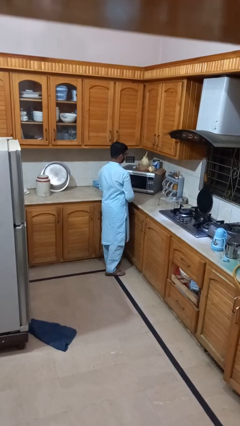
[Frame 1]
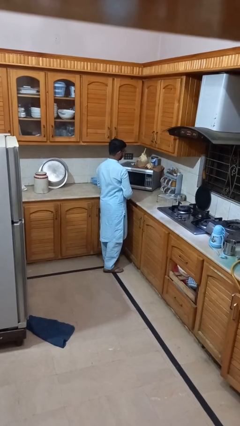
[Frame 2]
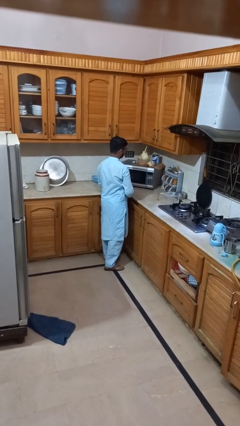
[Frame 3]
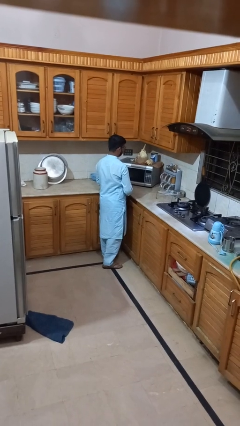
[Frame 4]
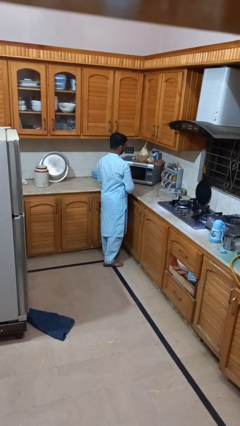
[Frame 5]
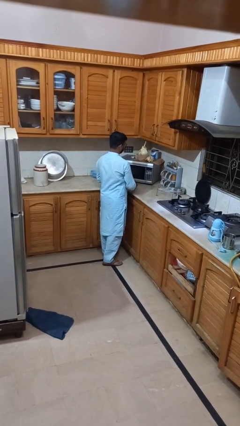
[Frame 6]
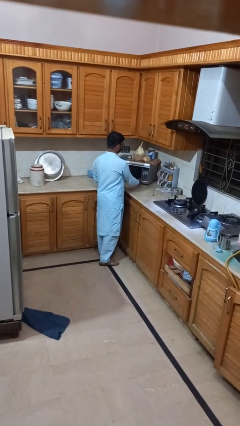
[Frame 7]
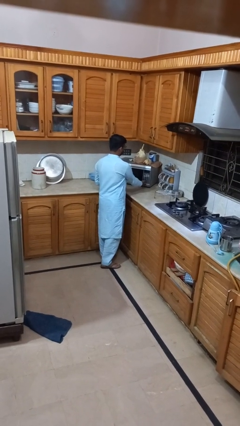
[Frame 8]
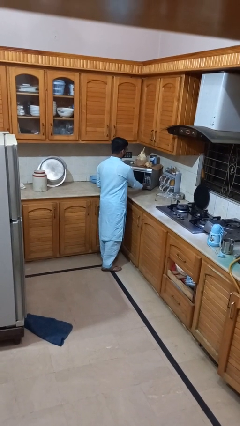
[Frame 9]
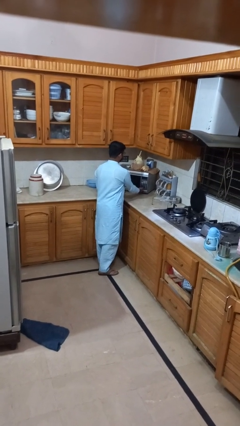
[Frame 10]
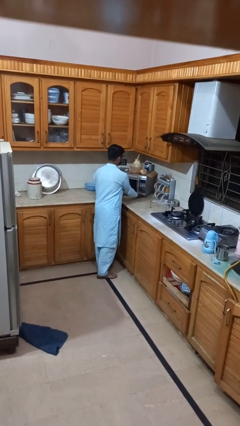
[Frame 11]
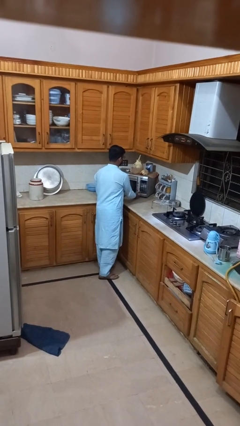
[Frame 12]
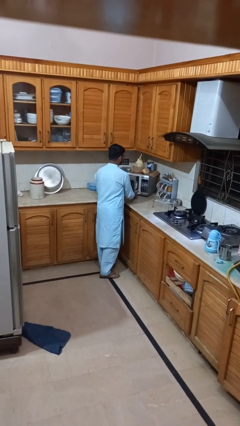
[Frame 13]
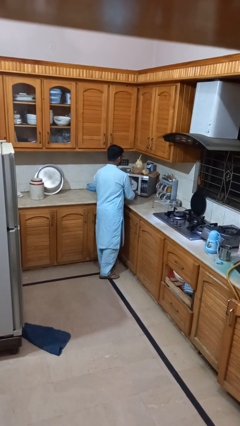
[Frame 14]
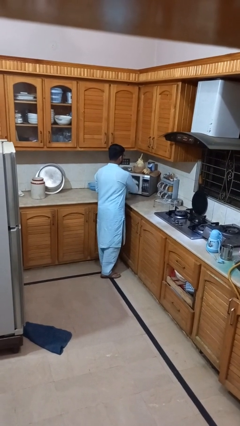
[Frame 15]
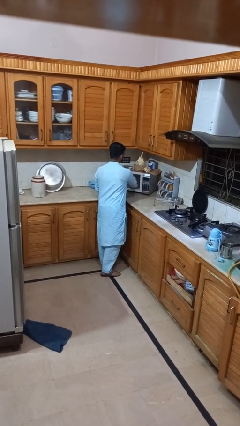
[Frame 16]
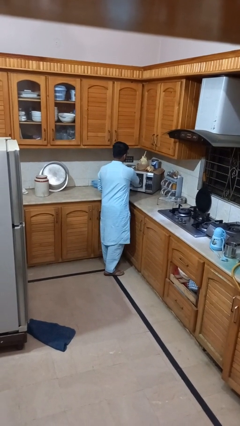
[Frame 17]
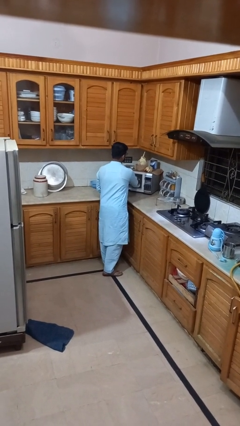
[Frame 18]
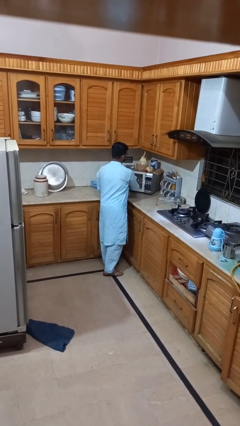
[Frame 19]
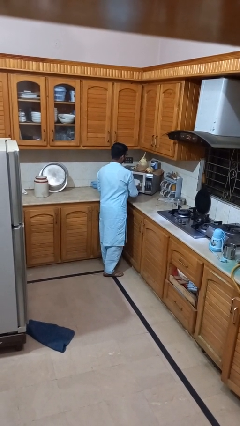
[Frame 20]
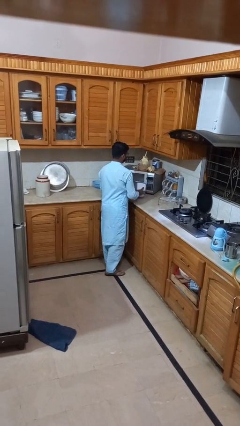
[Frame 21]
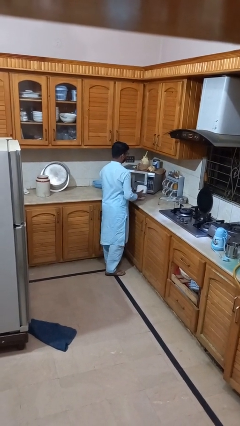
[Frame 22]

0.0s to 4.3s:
person takes object from microwave

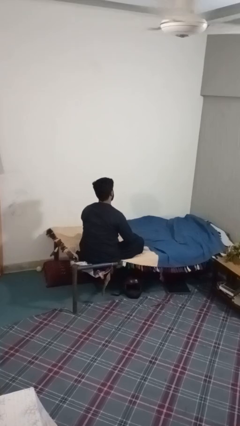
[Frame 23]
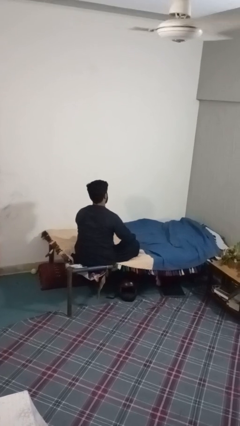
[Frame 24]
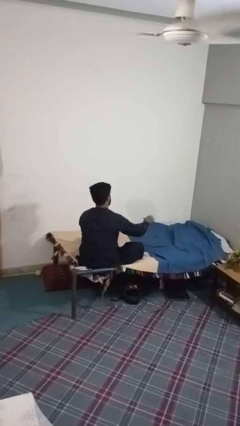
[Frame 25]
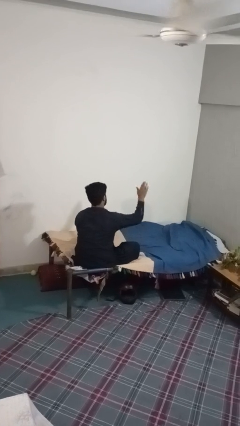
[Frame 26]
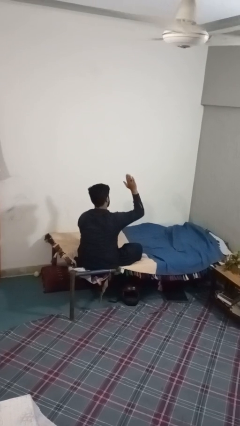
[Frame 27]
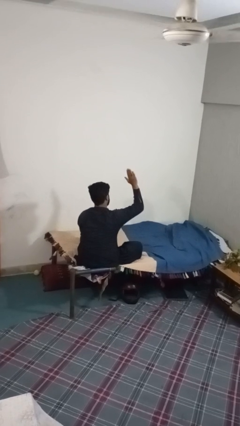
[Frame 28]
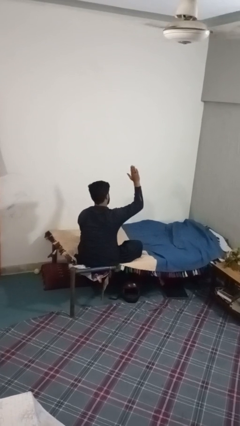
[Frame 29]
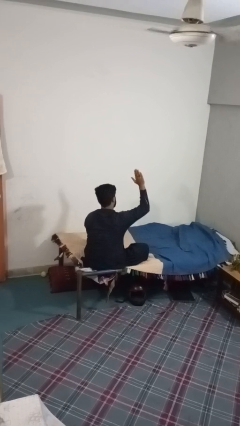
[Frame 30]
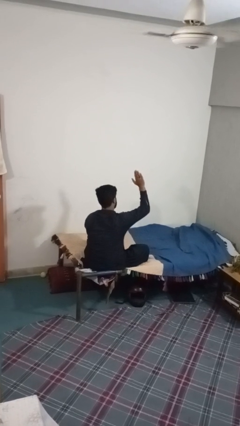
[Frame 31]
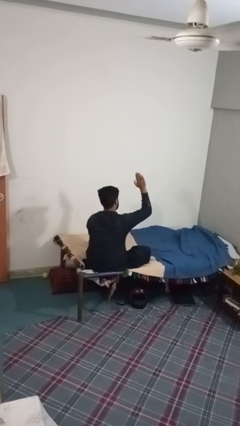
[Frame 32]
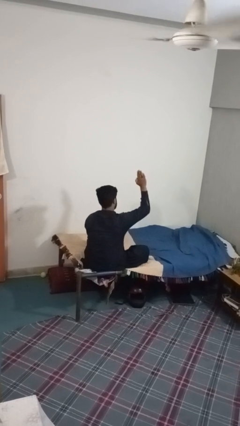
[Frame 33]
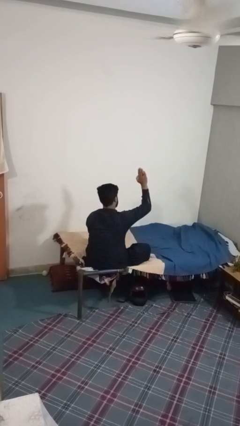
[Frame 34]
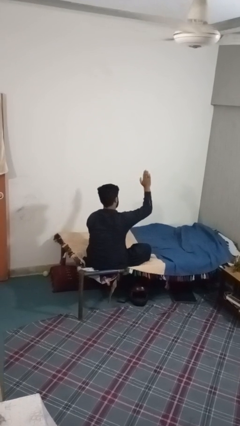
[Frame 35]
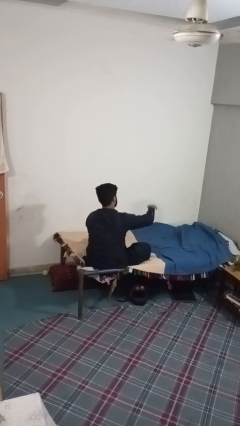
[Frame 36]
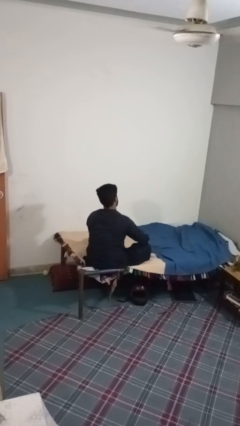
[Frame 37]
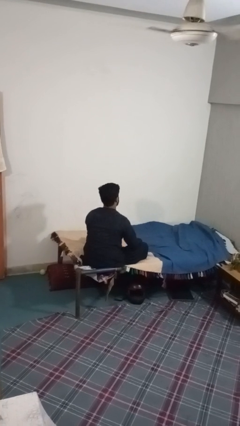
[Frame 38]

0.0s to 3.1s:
person gestures stop

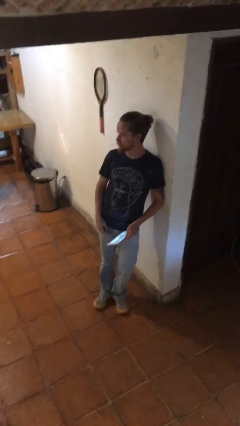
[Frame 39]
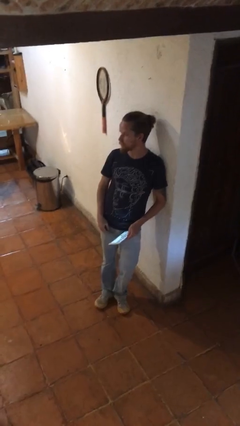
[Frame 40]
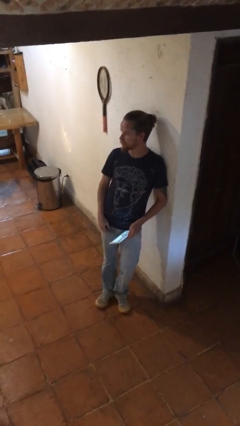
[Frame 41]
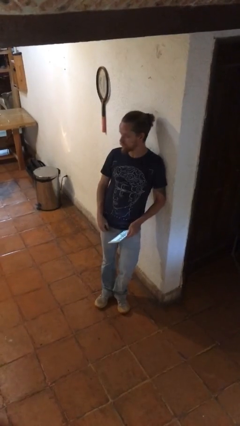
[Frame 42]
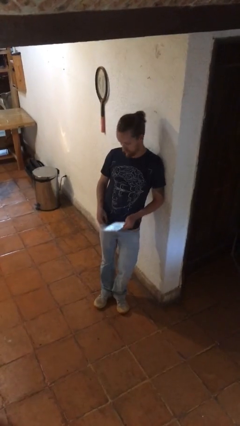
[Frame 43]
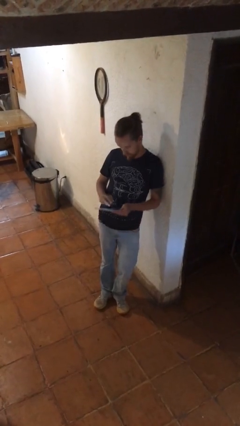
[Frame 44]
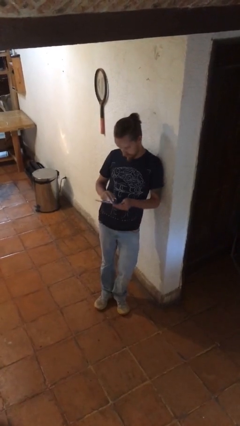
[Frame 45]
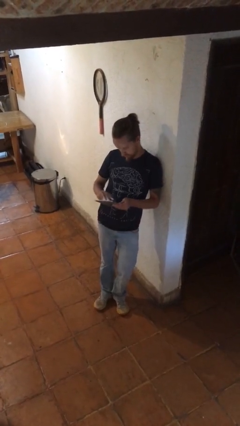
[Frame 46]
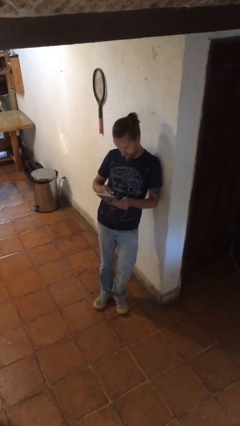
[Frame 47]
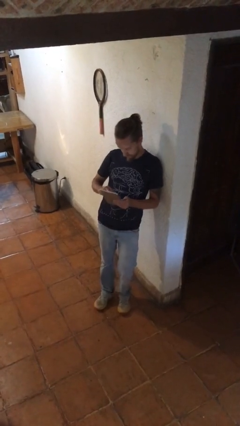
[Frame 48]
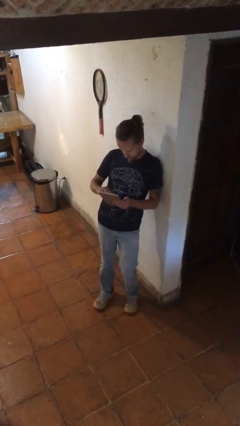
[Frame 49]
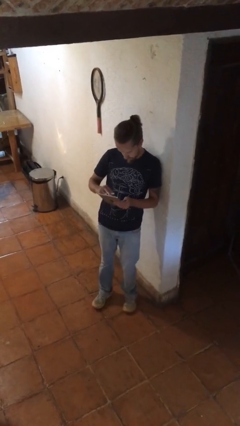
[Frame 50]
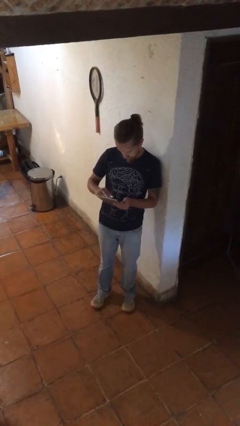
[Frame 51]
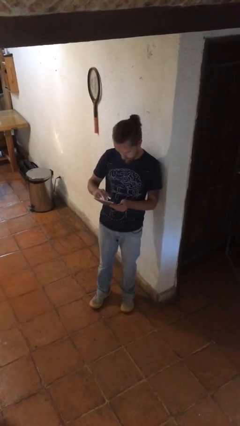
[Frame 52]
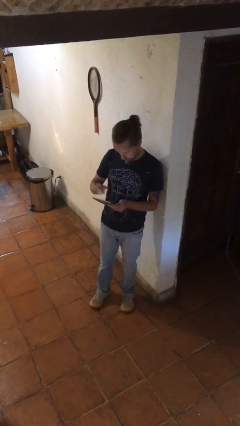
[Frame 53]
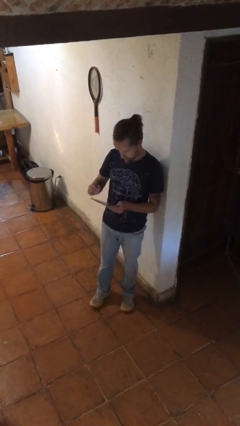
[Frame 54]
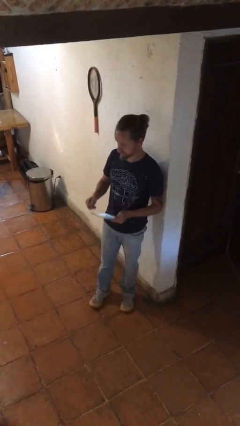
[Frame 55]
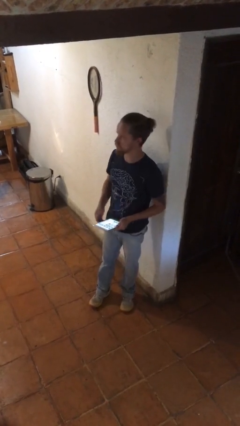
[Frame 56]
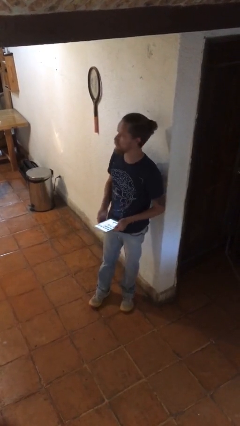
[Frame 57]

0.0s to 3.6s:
person interacts with tablet

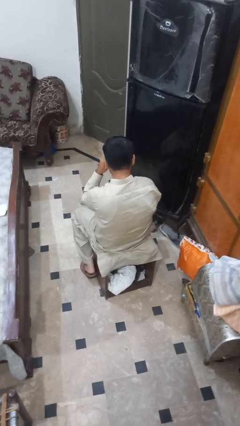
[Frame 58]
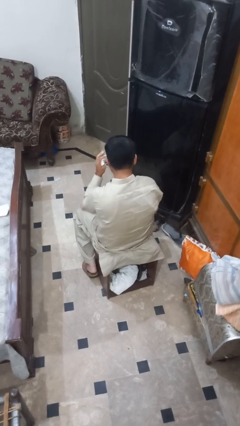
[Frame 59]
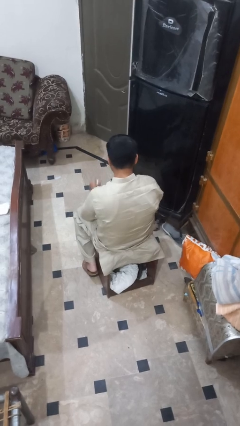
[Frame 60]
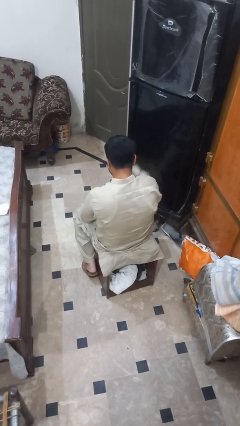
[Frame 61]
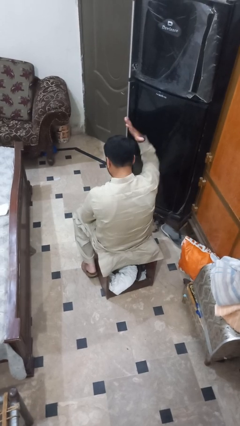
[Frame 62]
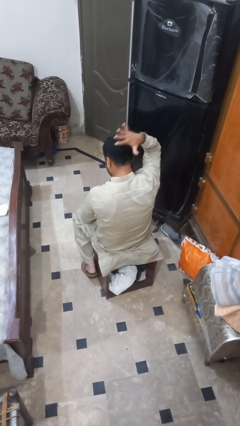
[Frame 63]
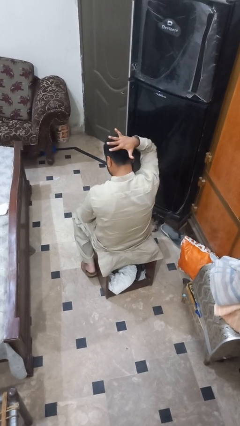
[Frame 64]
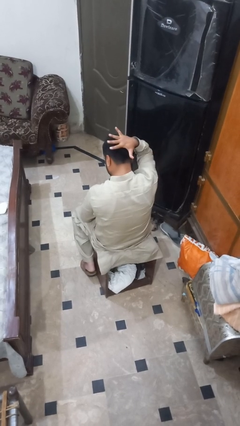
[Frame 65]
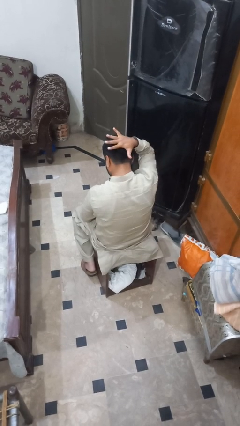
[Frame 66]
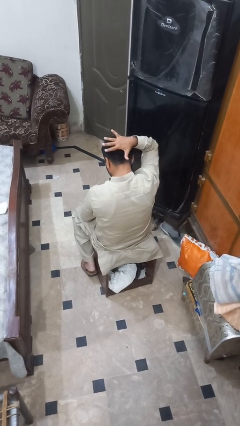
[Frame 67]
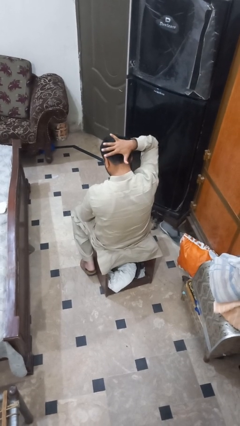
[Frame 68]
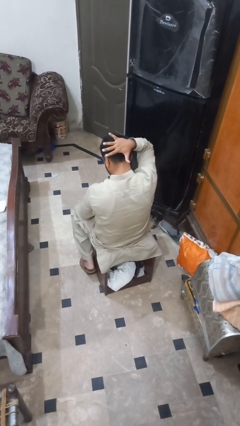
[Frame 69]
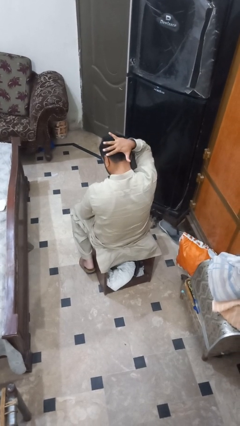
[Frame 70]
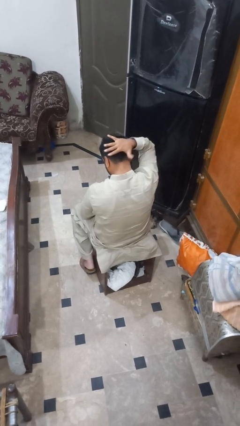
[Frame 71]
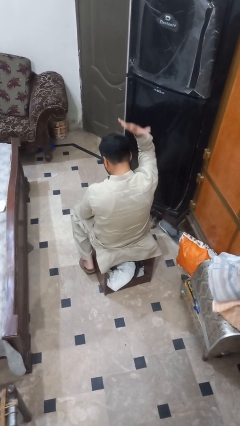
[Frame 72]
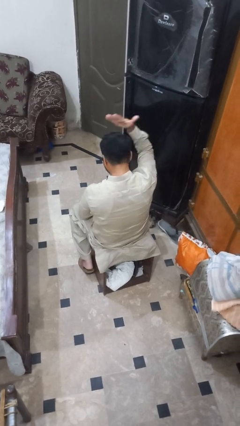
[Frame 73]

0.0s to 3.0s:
person pats head

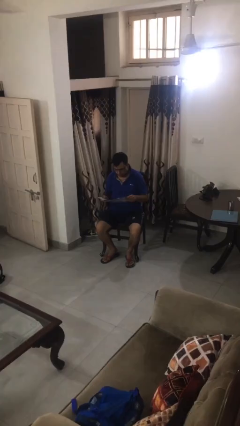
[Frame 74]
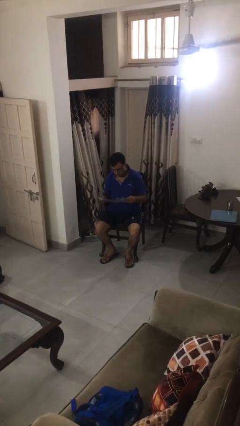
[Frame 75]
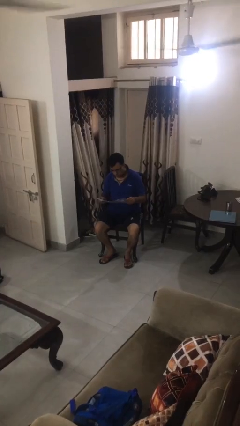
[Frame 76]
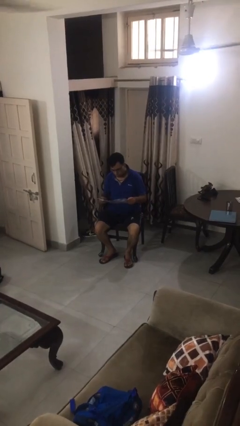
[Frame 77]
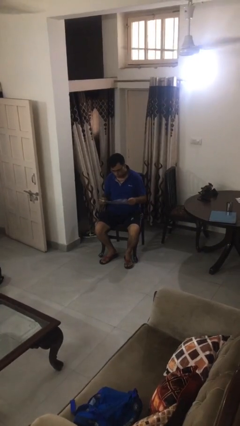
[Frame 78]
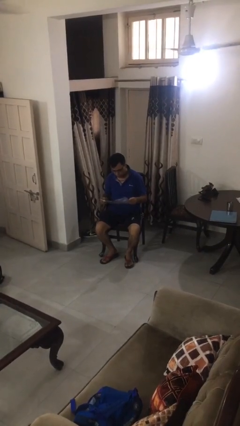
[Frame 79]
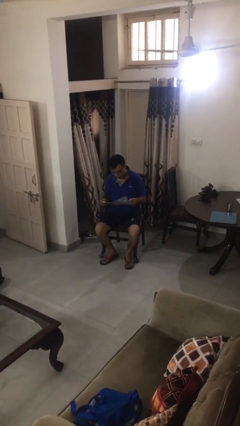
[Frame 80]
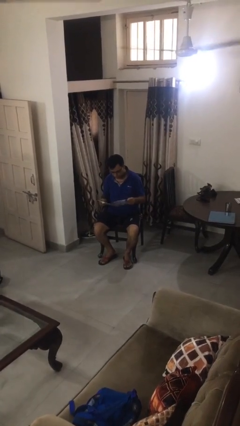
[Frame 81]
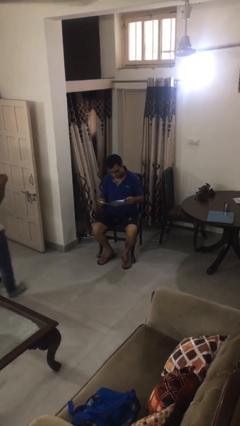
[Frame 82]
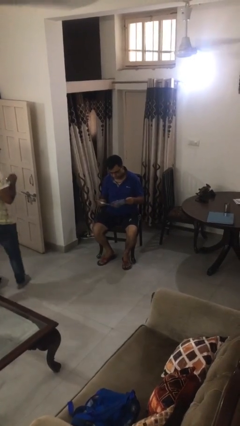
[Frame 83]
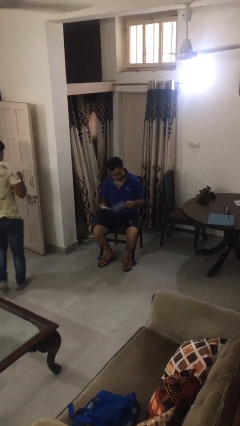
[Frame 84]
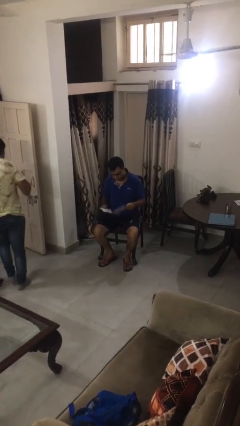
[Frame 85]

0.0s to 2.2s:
person reads magazine

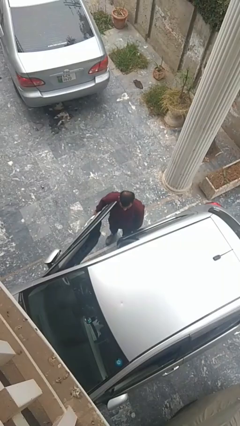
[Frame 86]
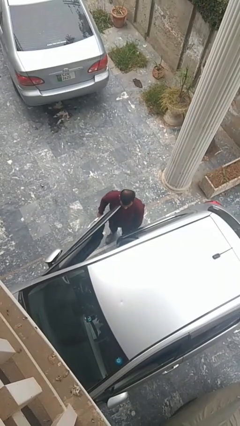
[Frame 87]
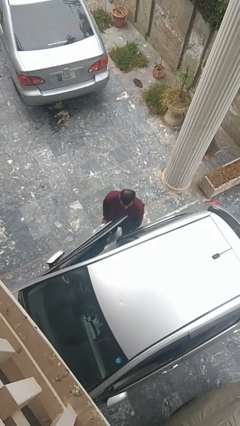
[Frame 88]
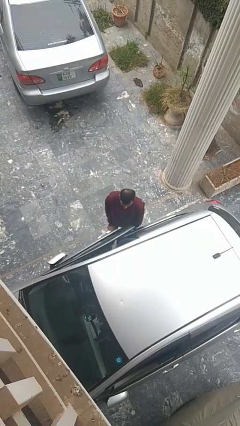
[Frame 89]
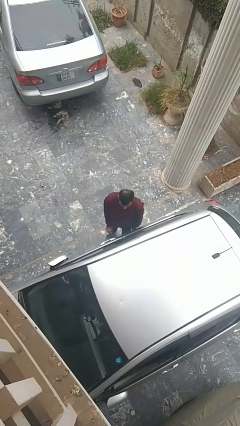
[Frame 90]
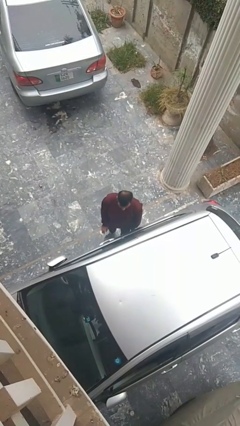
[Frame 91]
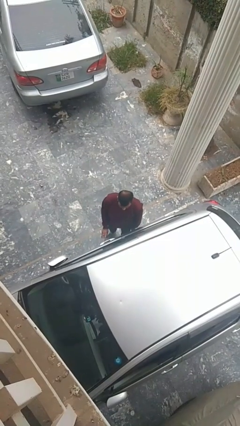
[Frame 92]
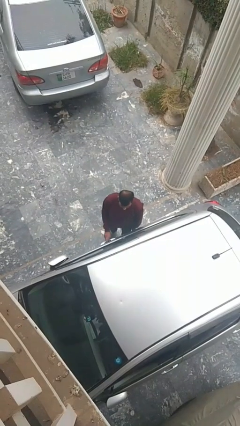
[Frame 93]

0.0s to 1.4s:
person closes car door

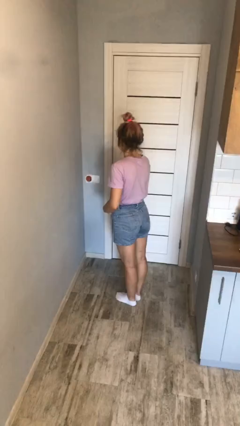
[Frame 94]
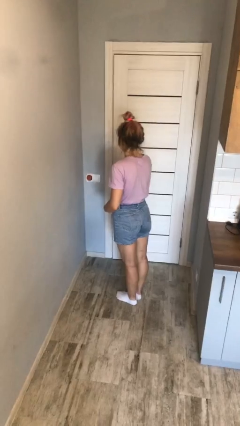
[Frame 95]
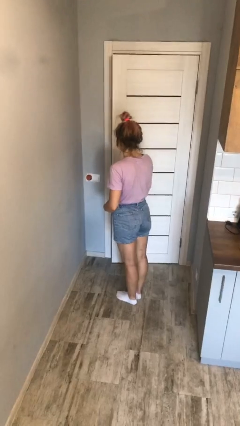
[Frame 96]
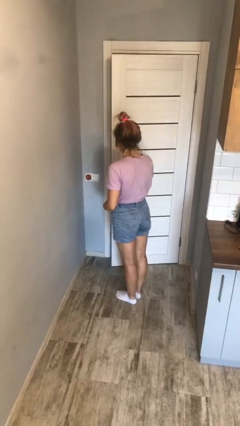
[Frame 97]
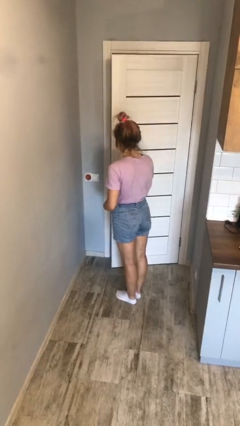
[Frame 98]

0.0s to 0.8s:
person opens facility door
